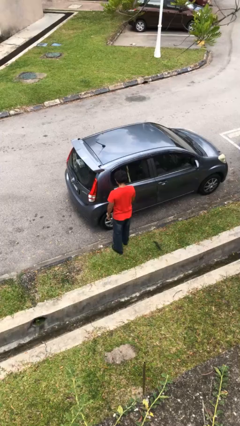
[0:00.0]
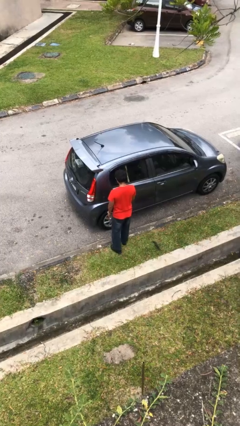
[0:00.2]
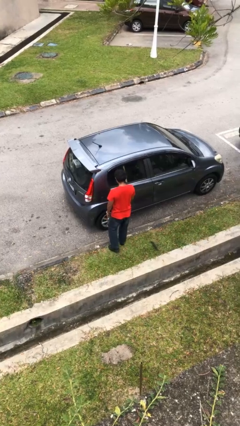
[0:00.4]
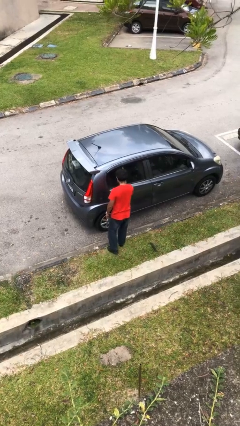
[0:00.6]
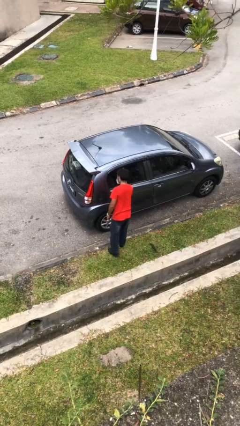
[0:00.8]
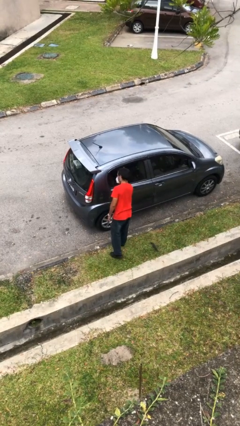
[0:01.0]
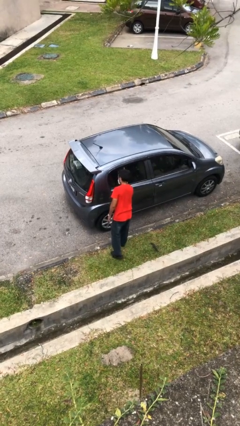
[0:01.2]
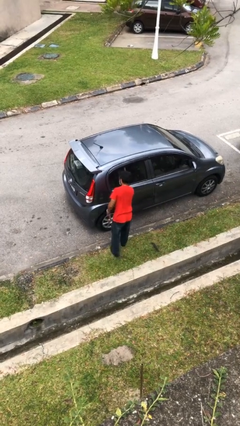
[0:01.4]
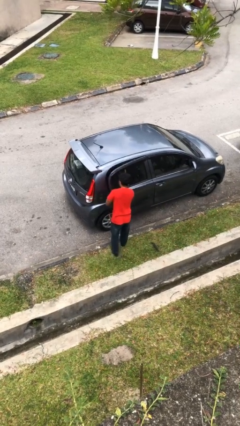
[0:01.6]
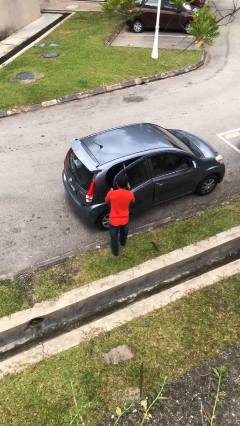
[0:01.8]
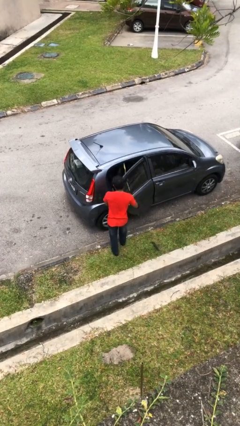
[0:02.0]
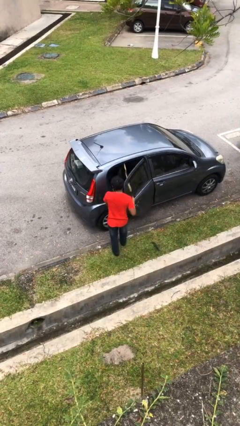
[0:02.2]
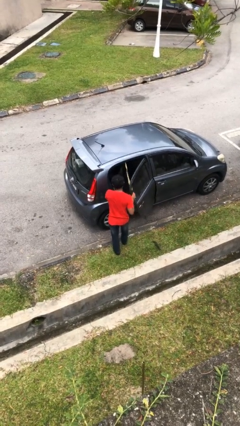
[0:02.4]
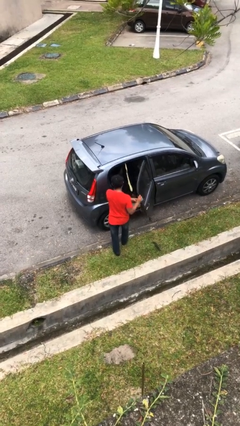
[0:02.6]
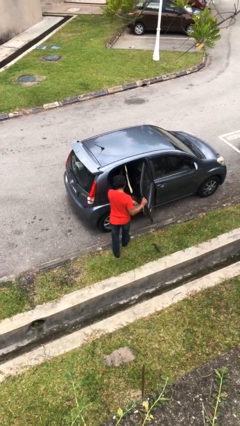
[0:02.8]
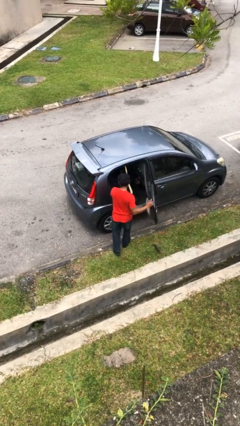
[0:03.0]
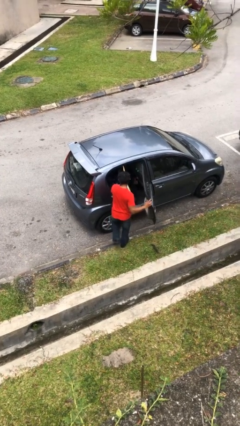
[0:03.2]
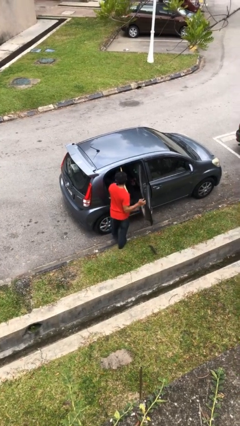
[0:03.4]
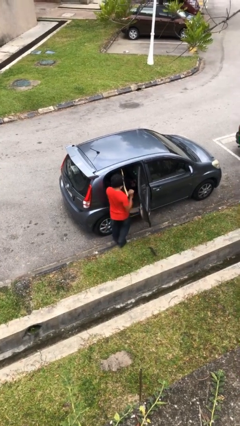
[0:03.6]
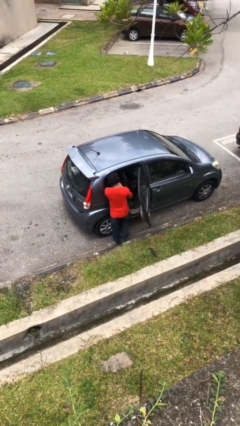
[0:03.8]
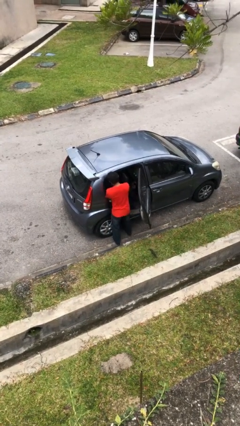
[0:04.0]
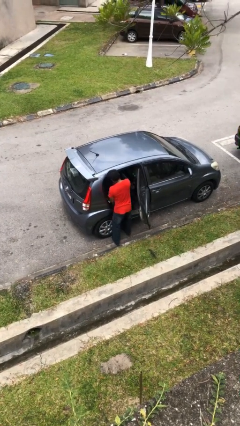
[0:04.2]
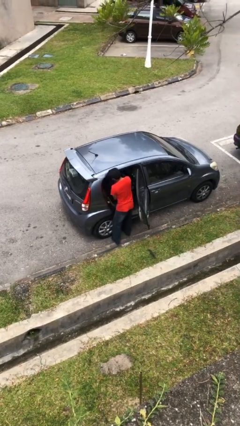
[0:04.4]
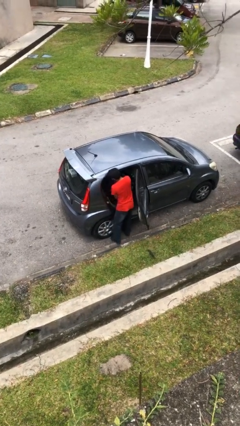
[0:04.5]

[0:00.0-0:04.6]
person opens car door

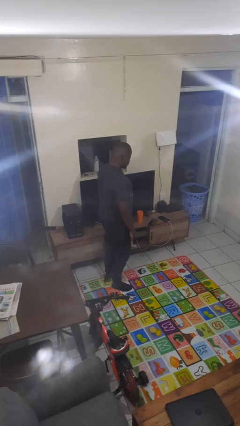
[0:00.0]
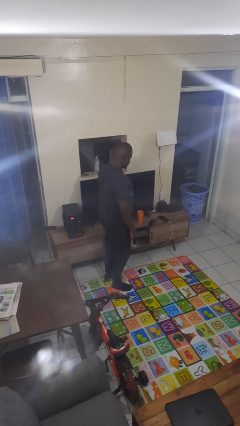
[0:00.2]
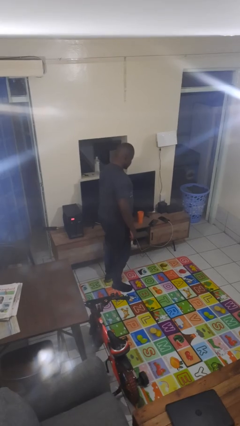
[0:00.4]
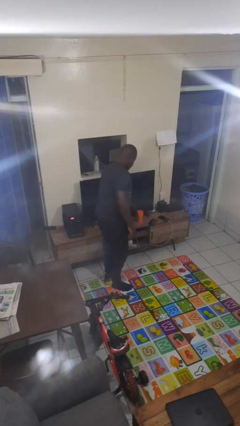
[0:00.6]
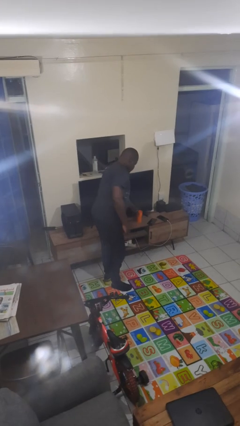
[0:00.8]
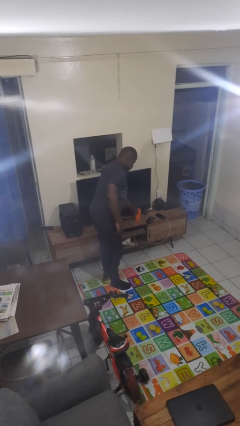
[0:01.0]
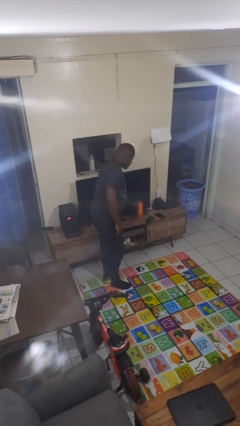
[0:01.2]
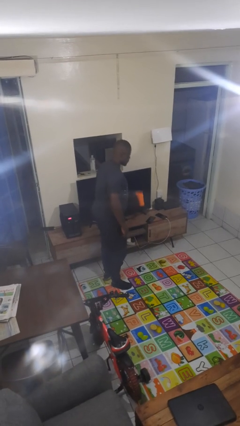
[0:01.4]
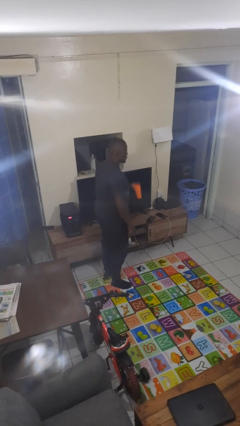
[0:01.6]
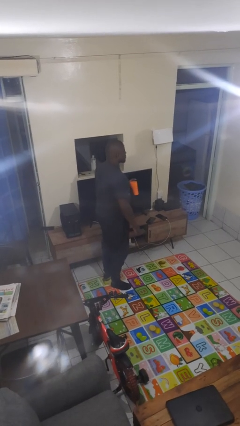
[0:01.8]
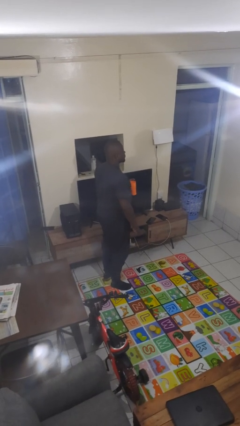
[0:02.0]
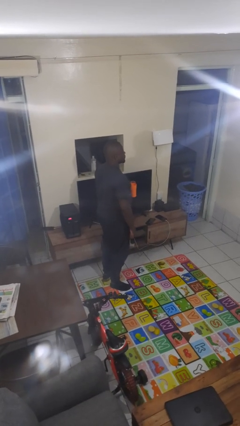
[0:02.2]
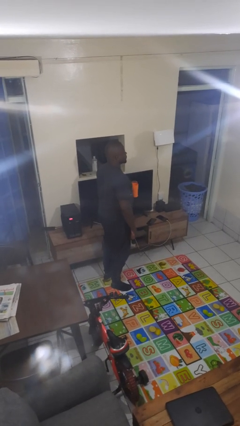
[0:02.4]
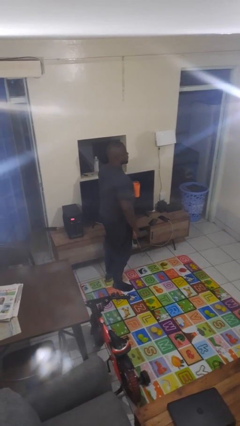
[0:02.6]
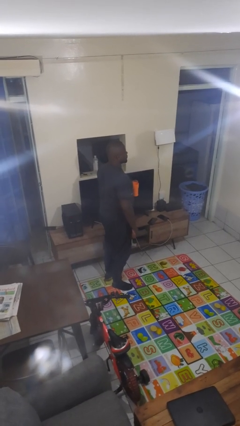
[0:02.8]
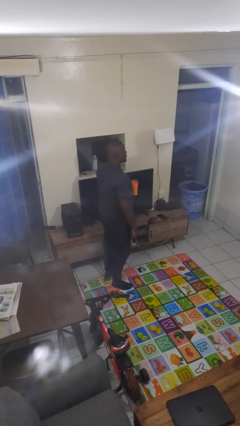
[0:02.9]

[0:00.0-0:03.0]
person picks up object from countertop

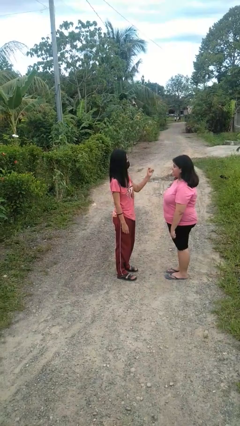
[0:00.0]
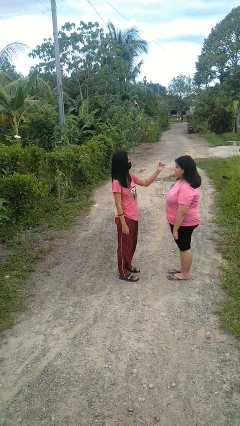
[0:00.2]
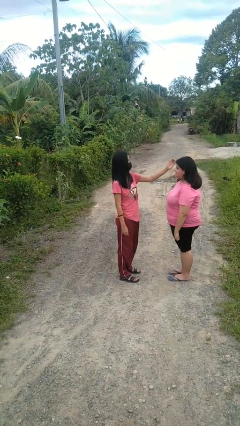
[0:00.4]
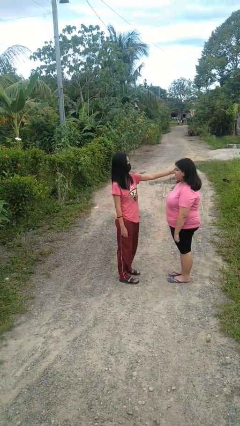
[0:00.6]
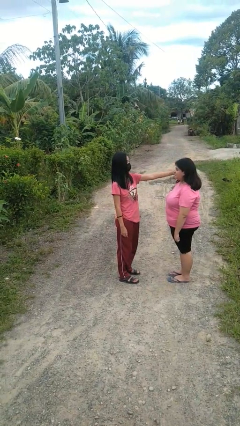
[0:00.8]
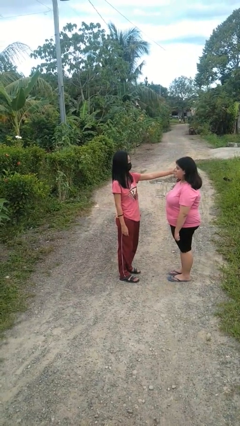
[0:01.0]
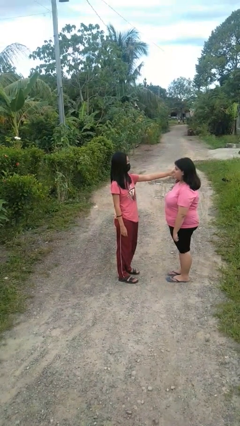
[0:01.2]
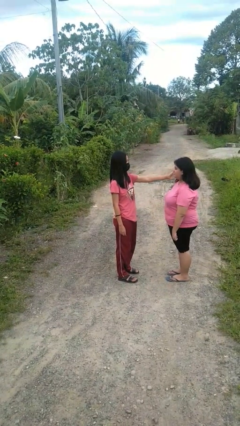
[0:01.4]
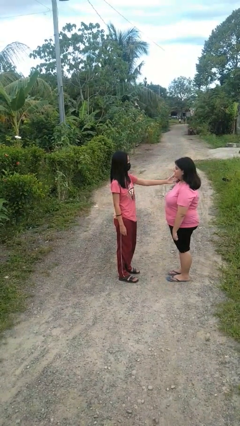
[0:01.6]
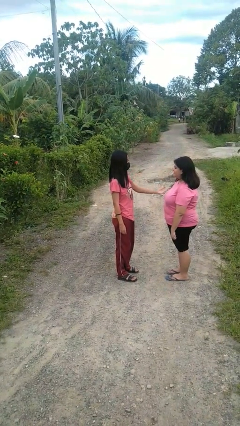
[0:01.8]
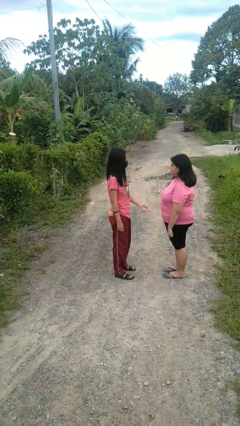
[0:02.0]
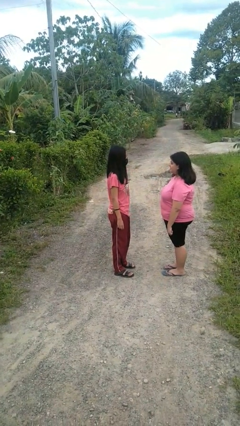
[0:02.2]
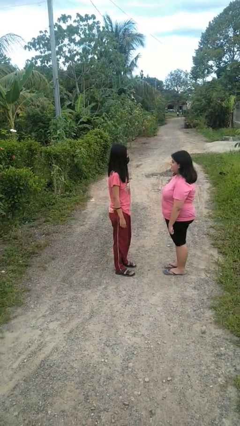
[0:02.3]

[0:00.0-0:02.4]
person touches face of person

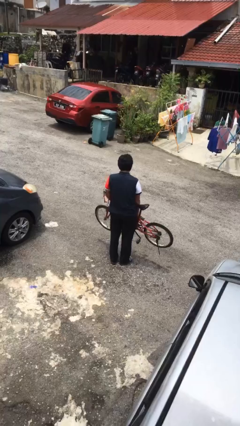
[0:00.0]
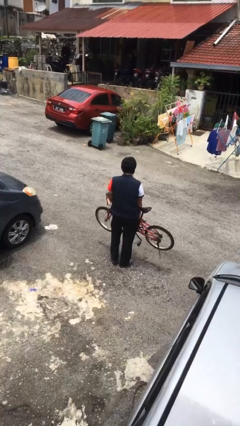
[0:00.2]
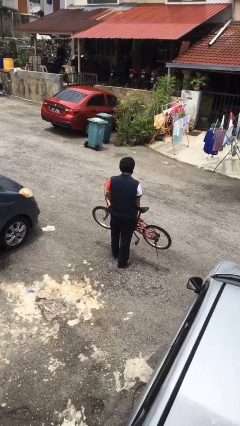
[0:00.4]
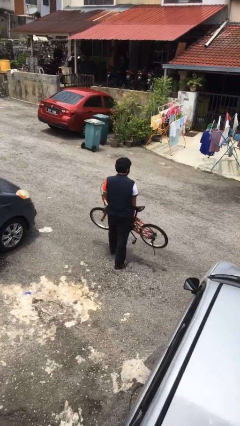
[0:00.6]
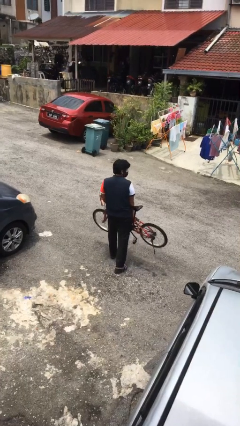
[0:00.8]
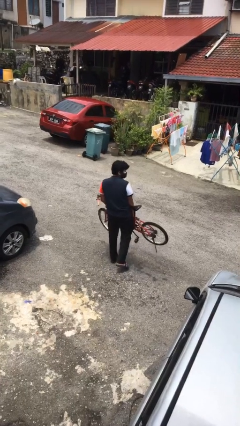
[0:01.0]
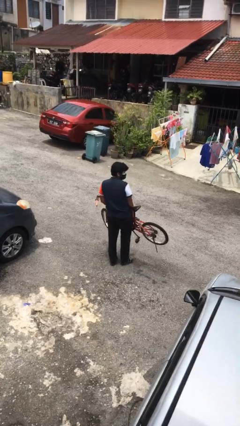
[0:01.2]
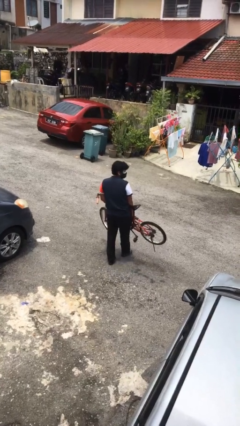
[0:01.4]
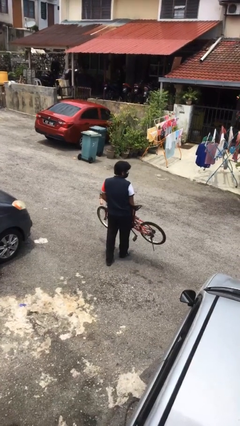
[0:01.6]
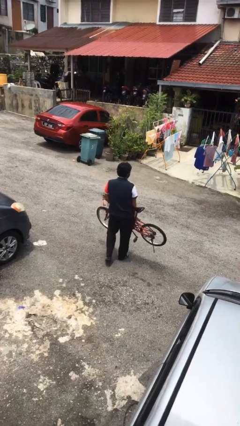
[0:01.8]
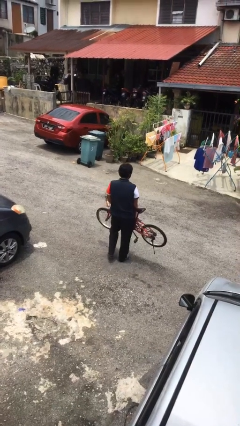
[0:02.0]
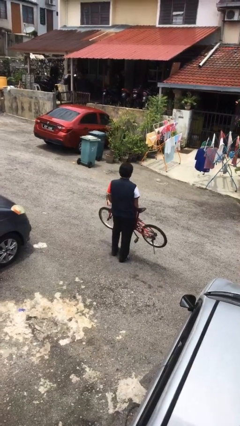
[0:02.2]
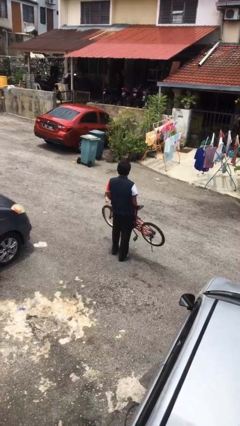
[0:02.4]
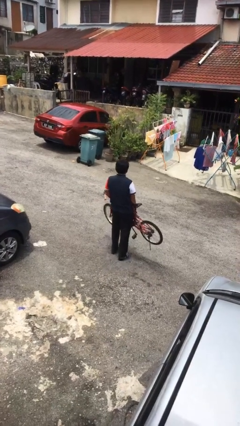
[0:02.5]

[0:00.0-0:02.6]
person carries bicycle

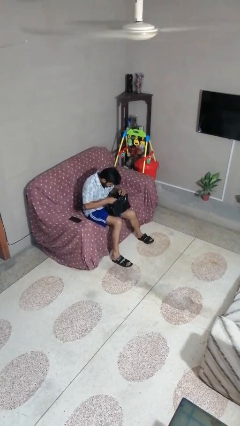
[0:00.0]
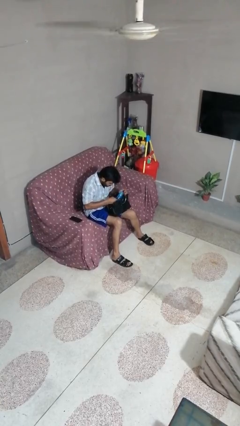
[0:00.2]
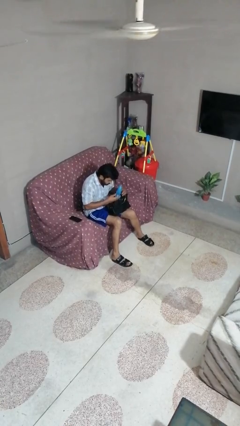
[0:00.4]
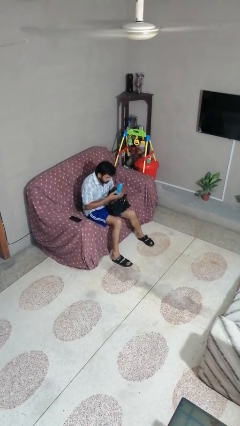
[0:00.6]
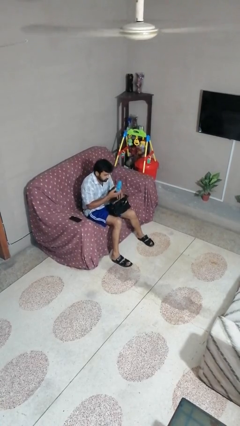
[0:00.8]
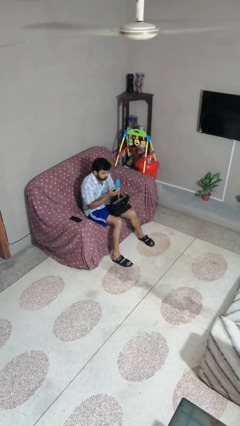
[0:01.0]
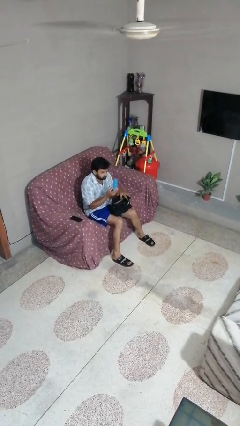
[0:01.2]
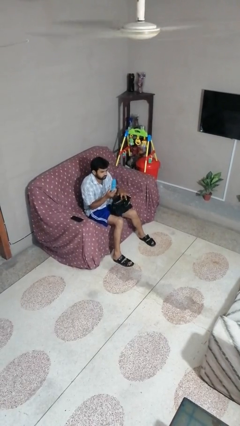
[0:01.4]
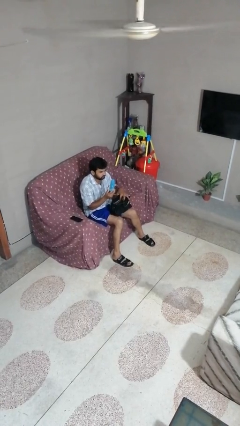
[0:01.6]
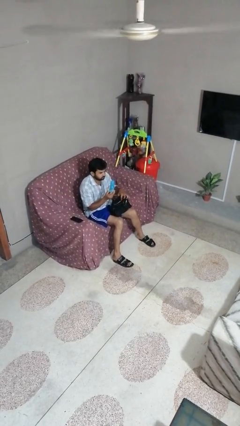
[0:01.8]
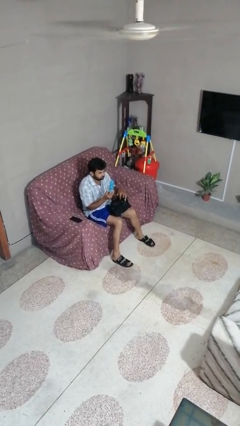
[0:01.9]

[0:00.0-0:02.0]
person takes object from purse

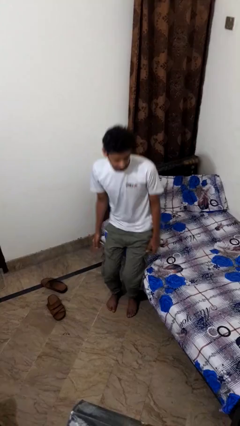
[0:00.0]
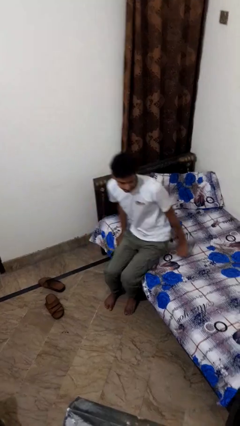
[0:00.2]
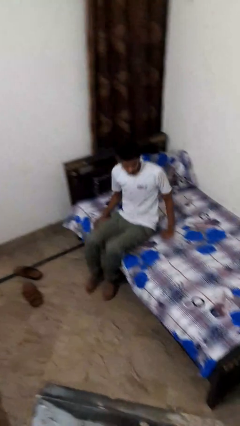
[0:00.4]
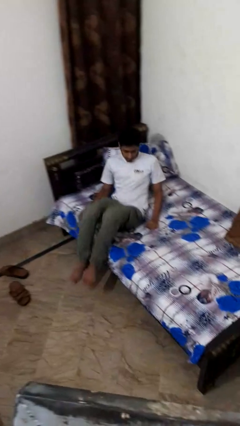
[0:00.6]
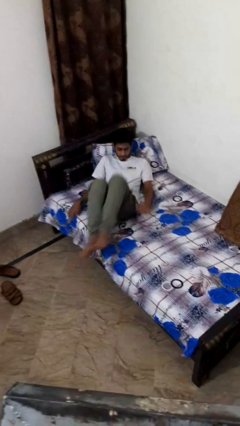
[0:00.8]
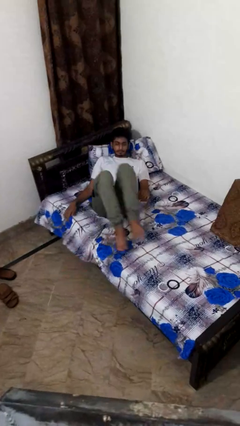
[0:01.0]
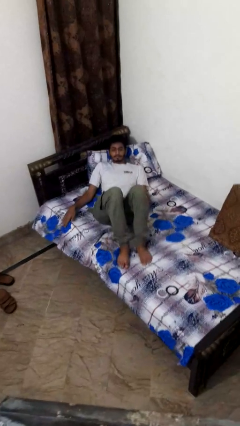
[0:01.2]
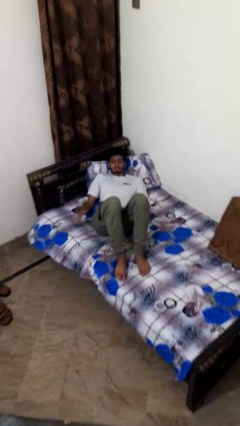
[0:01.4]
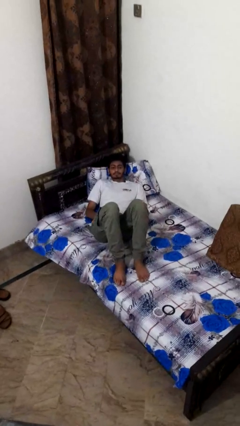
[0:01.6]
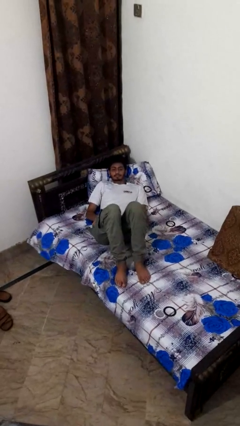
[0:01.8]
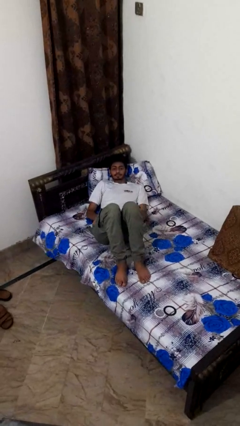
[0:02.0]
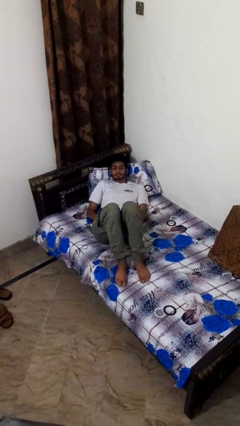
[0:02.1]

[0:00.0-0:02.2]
person lies down on bed

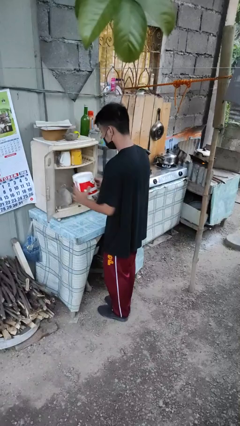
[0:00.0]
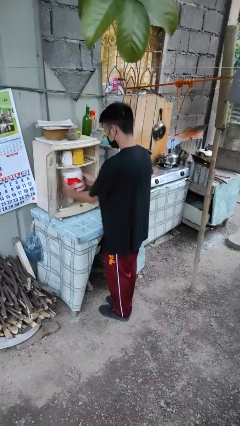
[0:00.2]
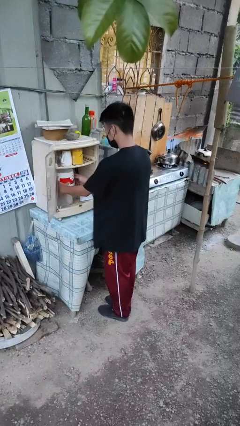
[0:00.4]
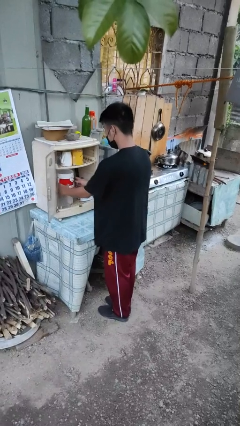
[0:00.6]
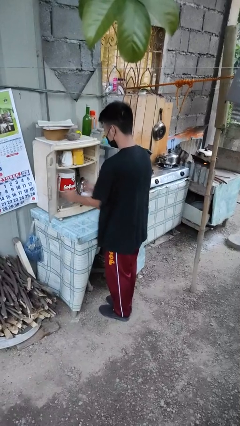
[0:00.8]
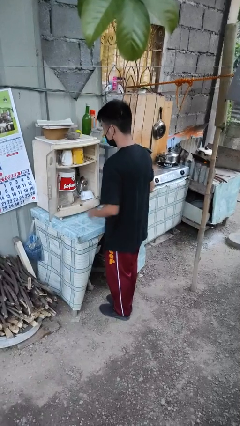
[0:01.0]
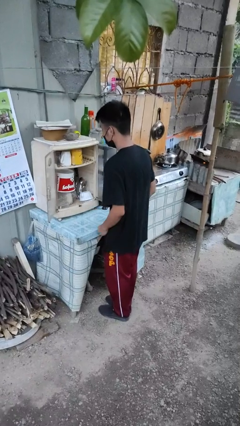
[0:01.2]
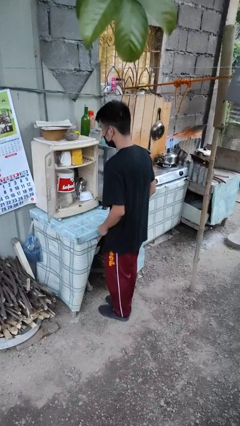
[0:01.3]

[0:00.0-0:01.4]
person puts down object into cabinet
